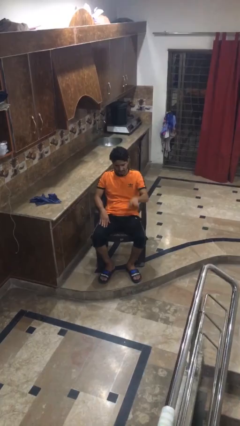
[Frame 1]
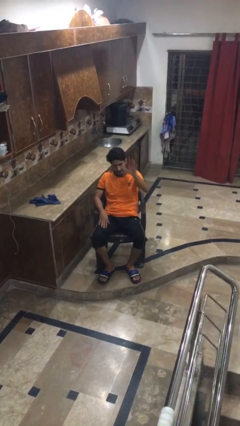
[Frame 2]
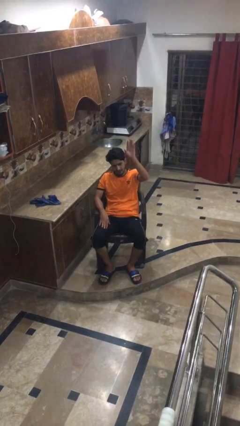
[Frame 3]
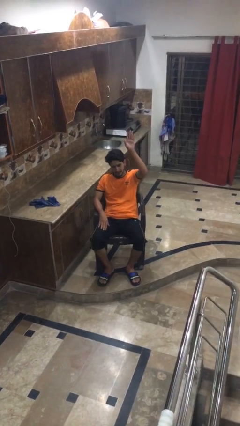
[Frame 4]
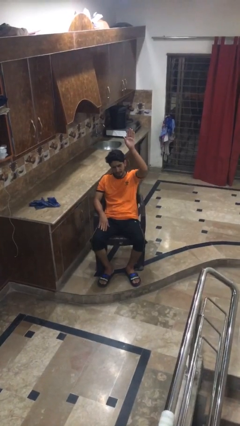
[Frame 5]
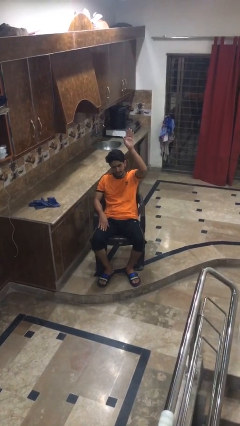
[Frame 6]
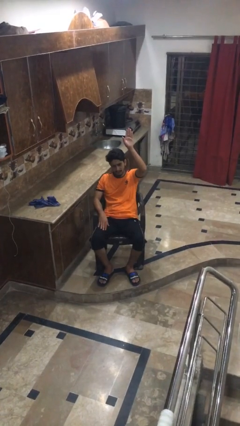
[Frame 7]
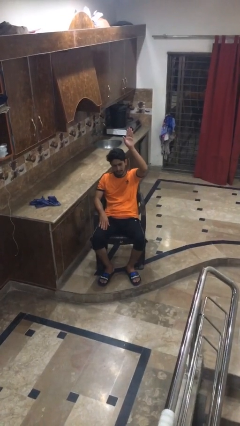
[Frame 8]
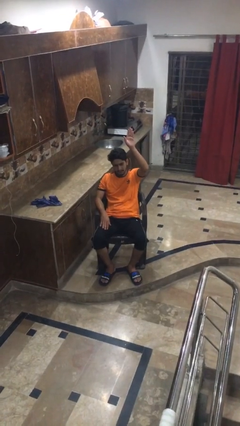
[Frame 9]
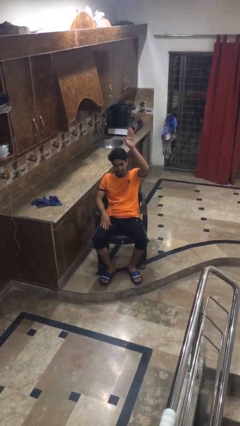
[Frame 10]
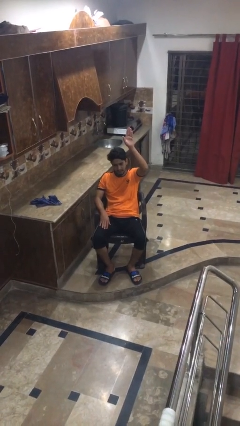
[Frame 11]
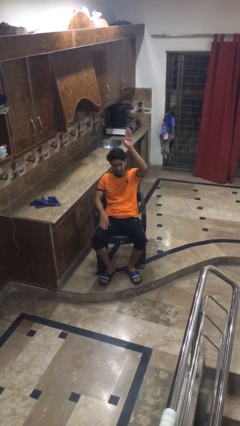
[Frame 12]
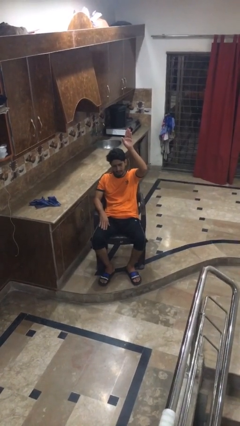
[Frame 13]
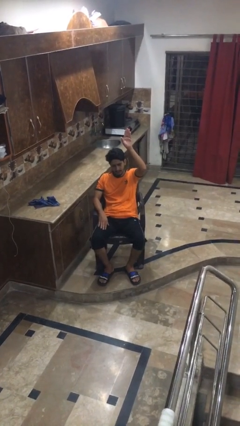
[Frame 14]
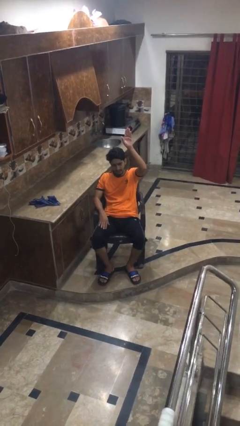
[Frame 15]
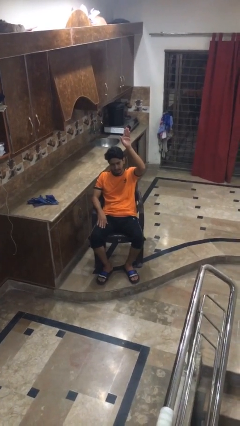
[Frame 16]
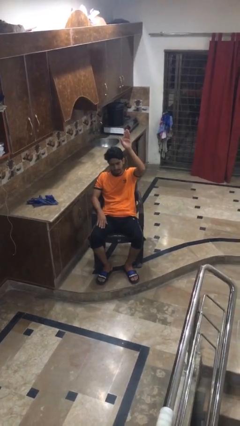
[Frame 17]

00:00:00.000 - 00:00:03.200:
person gestures raise hand

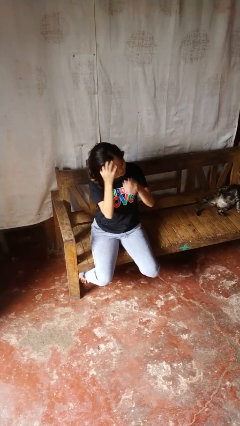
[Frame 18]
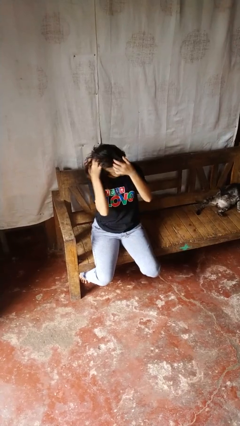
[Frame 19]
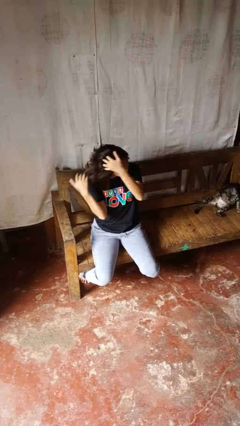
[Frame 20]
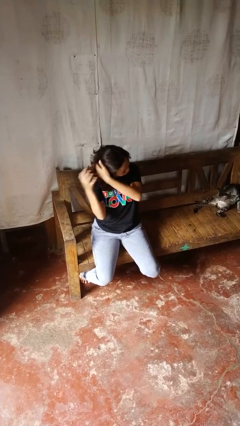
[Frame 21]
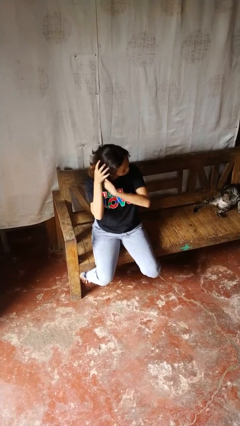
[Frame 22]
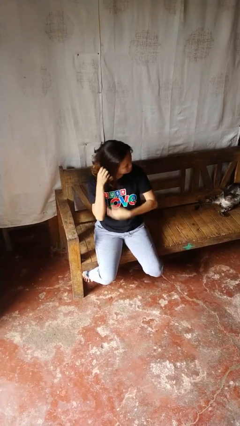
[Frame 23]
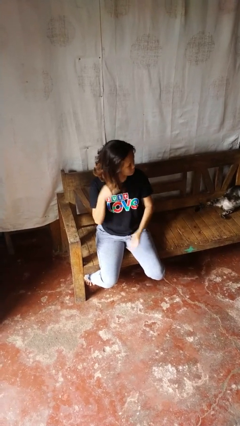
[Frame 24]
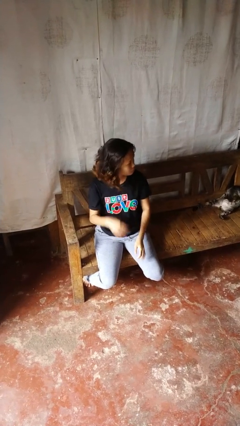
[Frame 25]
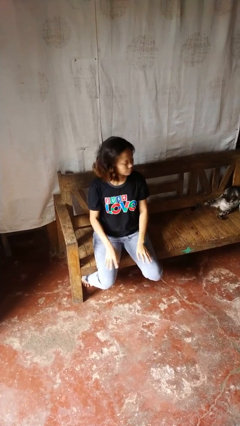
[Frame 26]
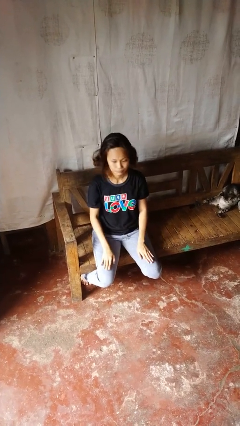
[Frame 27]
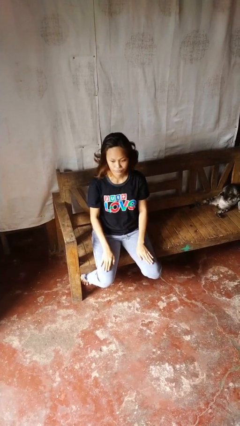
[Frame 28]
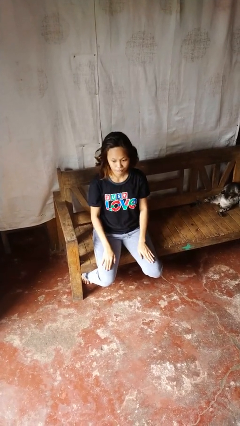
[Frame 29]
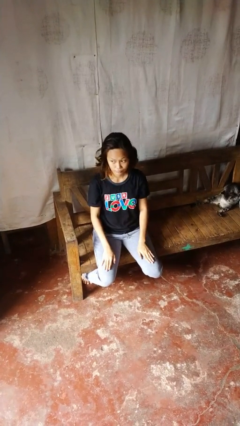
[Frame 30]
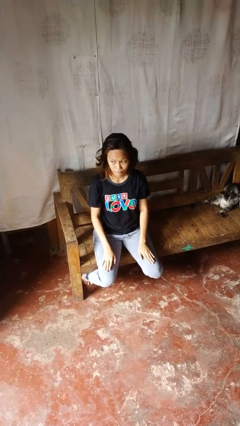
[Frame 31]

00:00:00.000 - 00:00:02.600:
person strokes hair

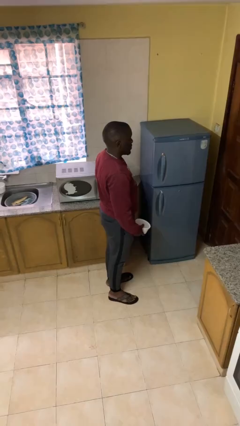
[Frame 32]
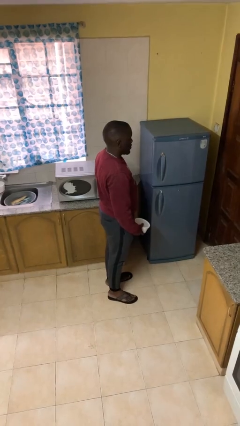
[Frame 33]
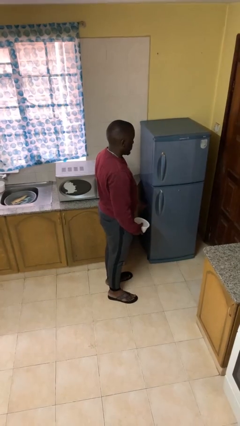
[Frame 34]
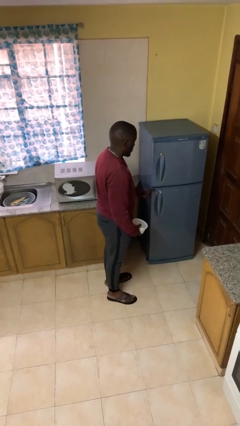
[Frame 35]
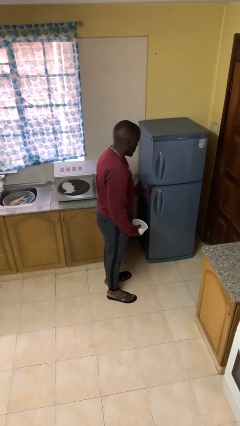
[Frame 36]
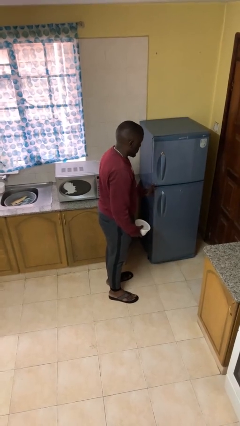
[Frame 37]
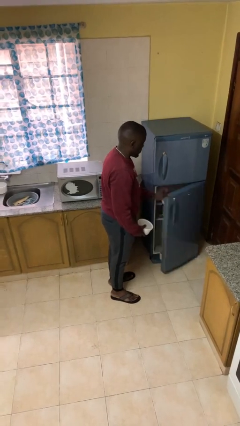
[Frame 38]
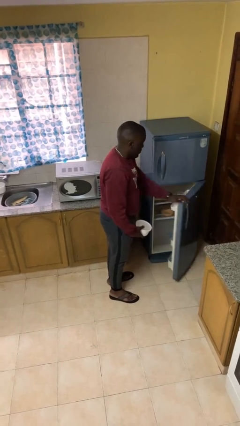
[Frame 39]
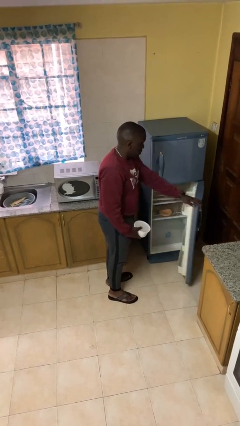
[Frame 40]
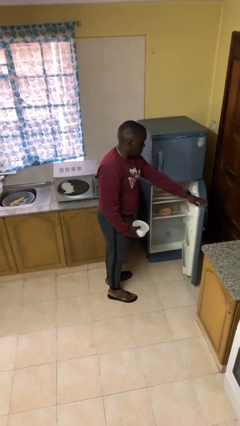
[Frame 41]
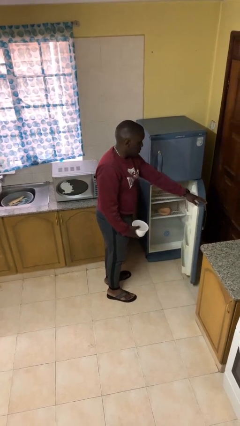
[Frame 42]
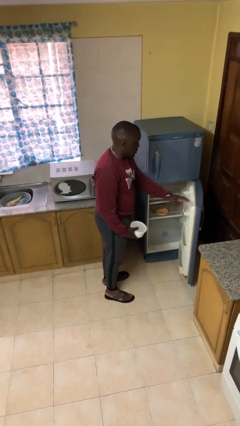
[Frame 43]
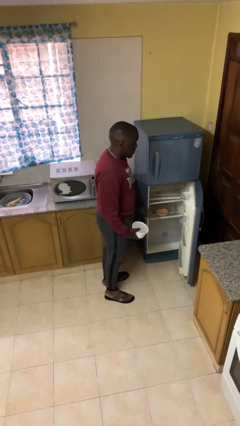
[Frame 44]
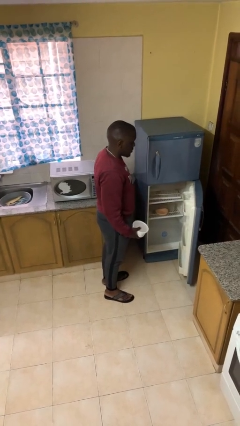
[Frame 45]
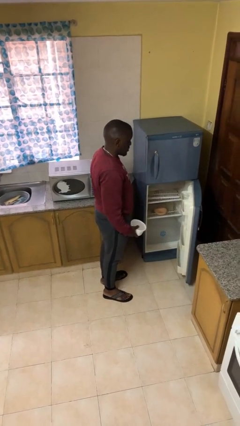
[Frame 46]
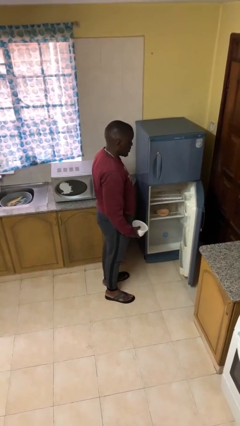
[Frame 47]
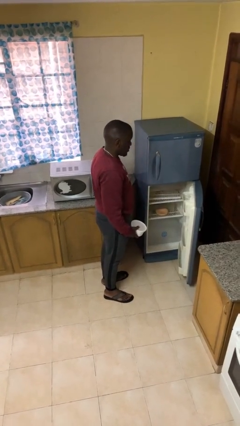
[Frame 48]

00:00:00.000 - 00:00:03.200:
person opens refrigerator

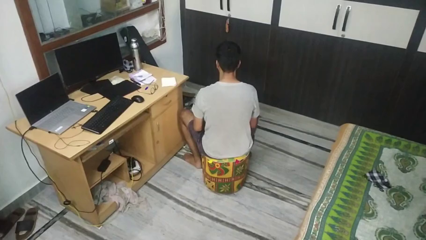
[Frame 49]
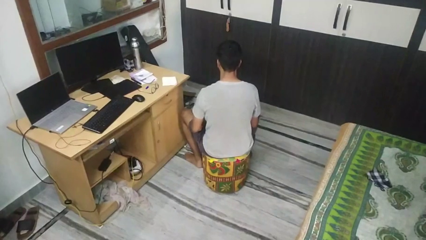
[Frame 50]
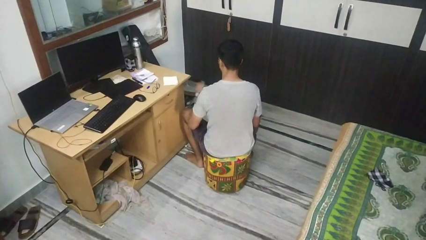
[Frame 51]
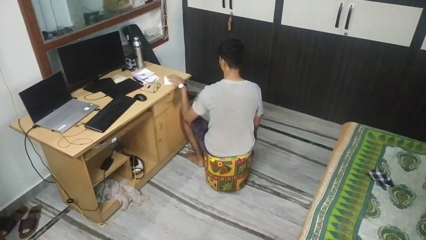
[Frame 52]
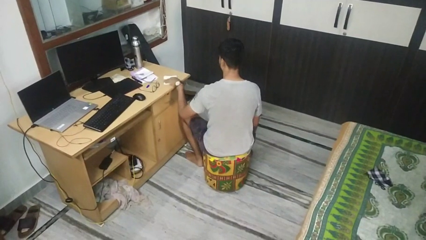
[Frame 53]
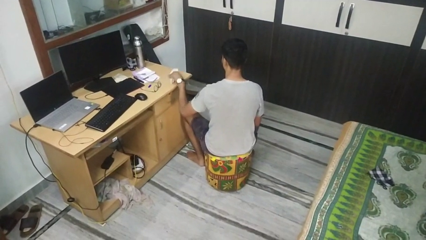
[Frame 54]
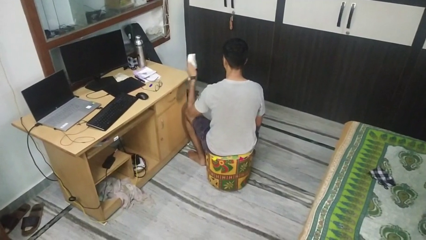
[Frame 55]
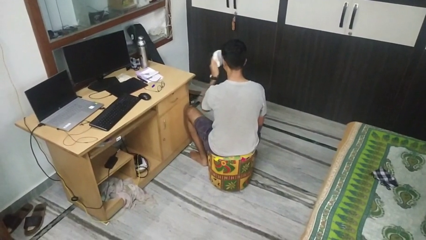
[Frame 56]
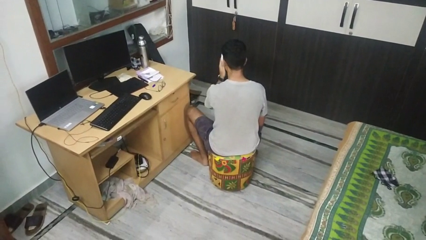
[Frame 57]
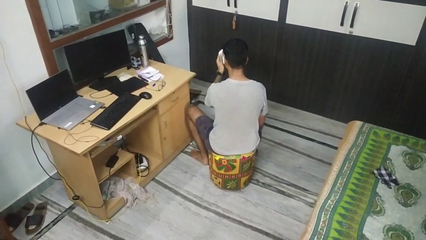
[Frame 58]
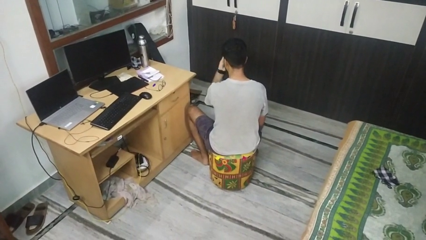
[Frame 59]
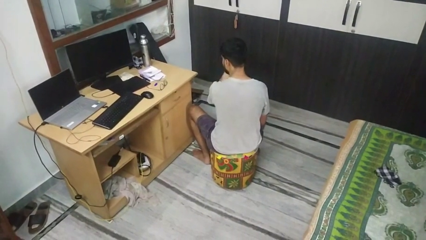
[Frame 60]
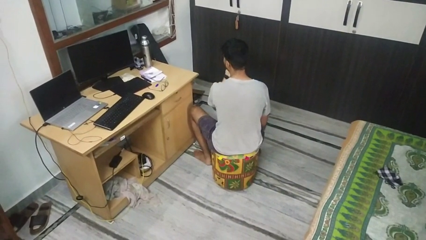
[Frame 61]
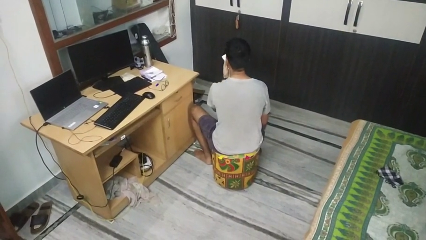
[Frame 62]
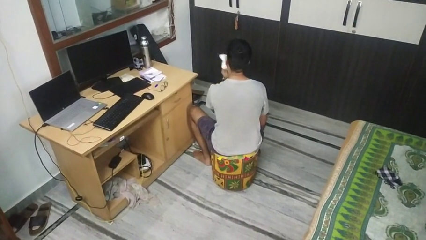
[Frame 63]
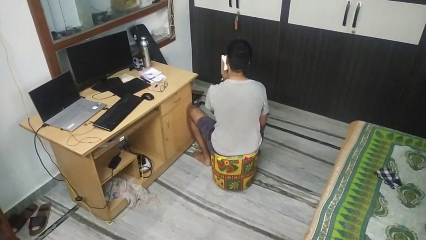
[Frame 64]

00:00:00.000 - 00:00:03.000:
person wipes mouth with napkin

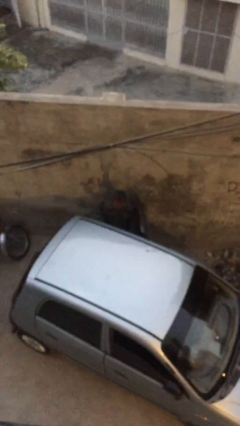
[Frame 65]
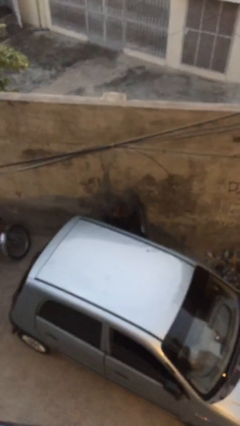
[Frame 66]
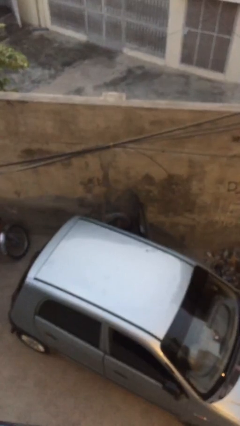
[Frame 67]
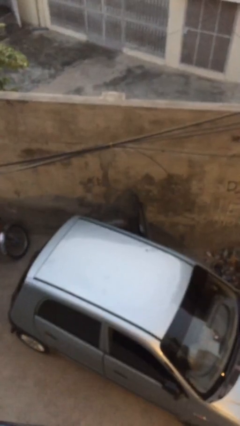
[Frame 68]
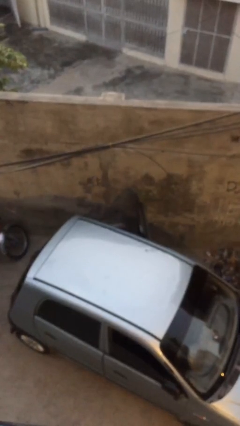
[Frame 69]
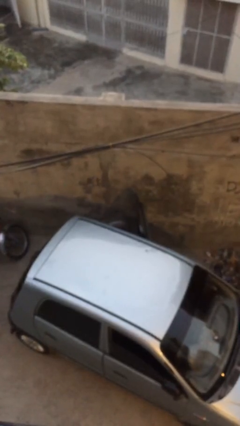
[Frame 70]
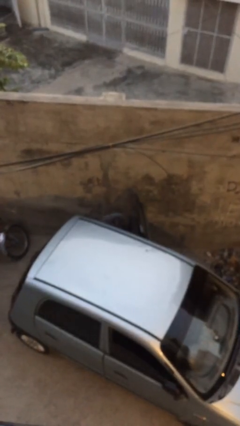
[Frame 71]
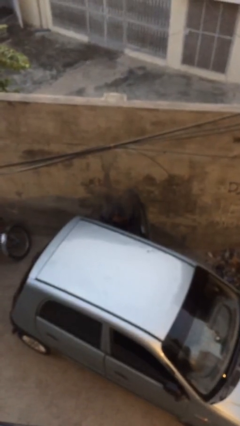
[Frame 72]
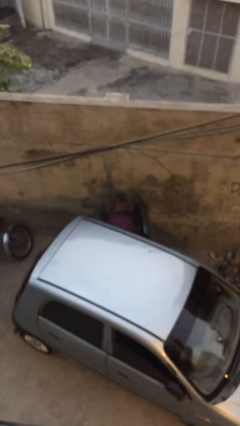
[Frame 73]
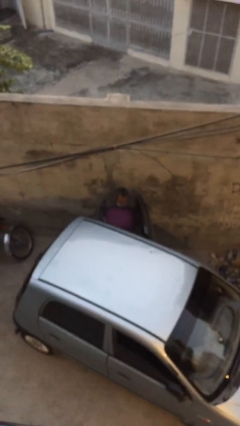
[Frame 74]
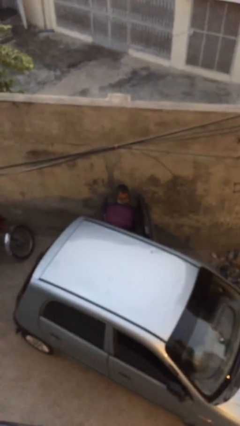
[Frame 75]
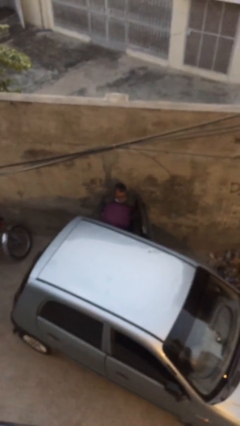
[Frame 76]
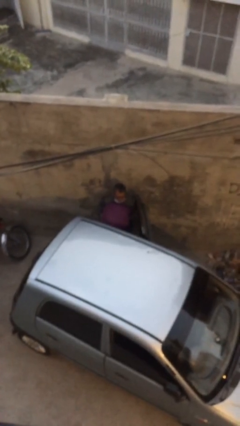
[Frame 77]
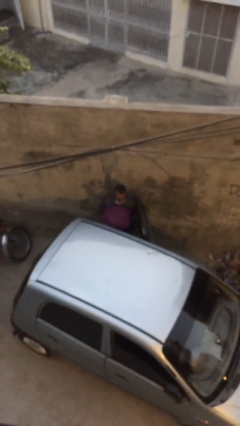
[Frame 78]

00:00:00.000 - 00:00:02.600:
person unloads car

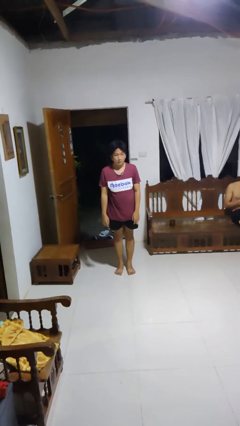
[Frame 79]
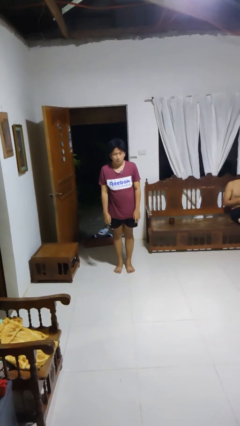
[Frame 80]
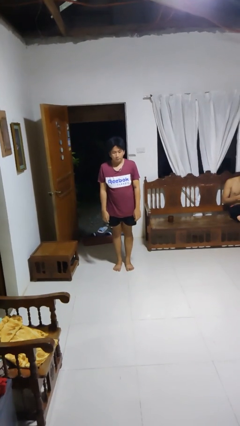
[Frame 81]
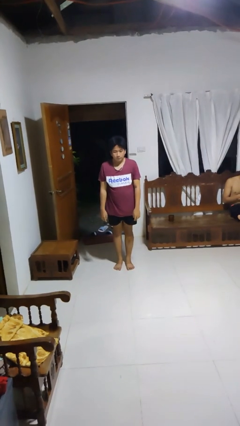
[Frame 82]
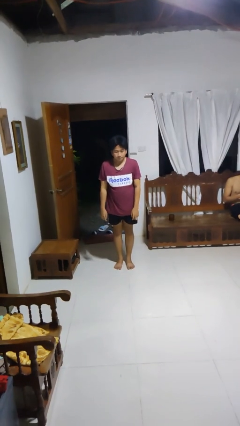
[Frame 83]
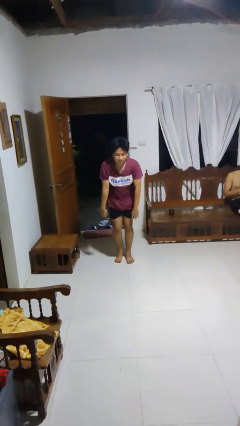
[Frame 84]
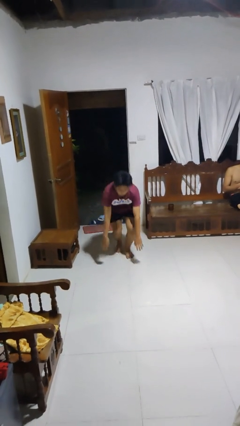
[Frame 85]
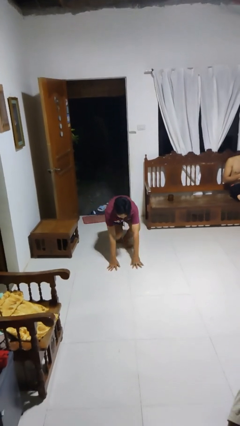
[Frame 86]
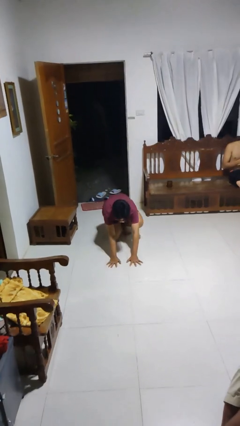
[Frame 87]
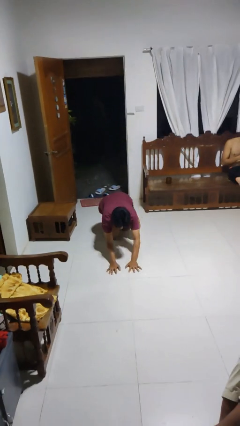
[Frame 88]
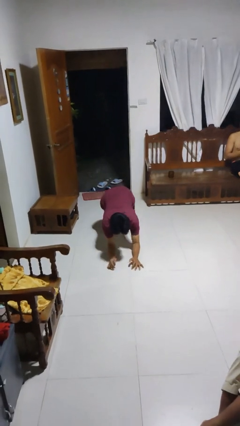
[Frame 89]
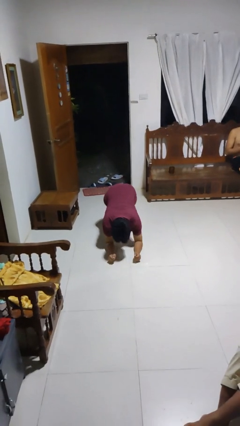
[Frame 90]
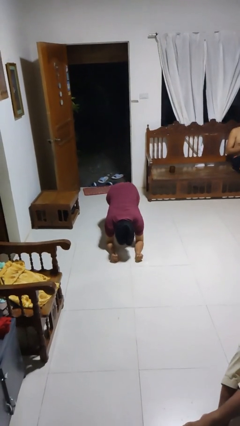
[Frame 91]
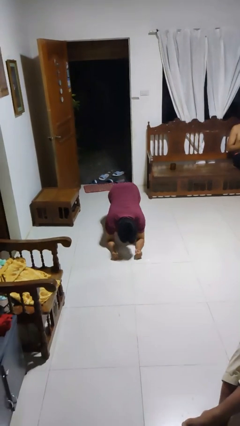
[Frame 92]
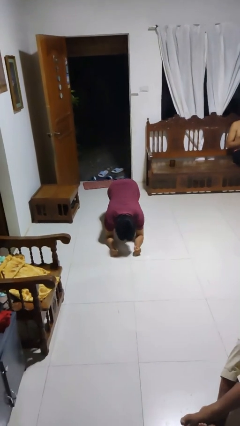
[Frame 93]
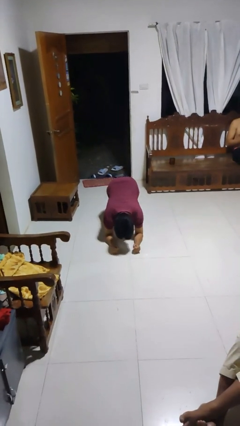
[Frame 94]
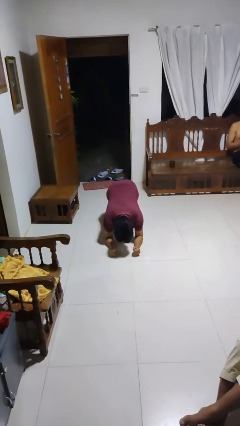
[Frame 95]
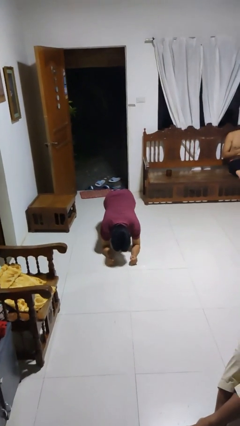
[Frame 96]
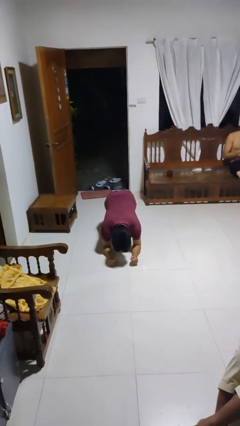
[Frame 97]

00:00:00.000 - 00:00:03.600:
person exercises with plank
